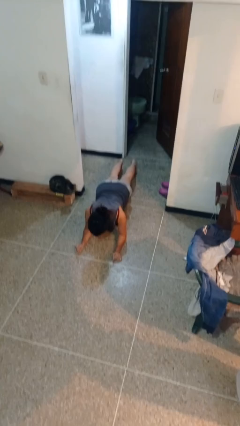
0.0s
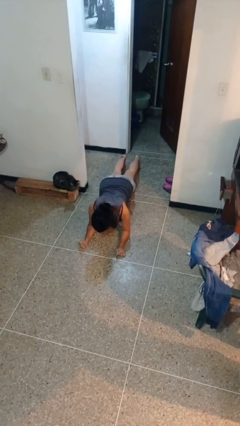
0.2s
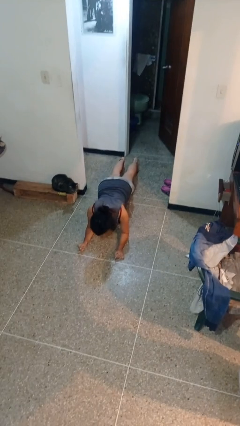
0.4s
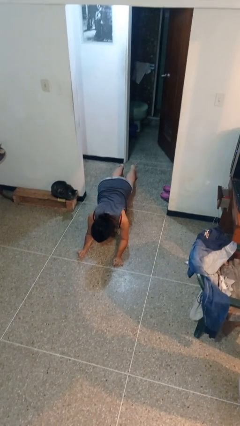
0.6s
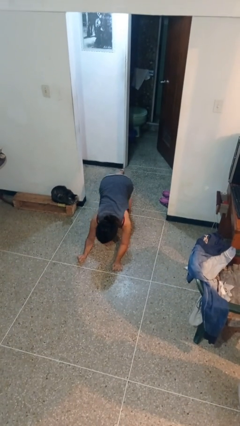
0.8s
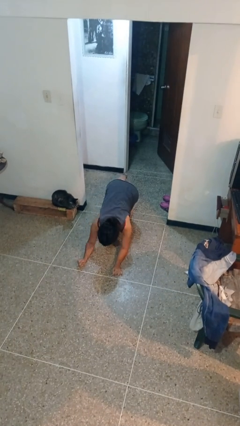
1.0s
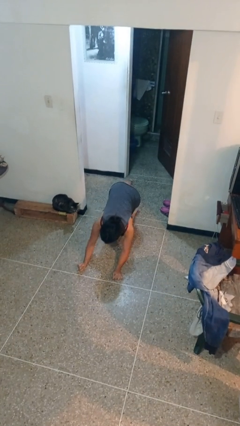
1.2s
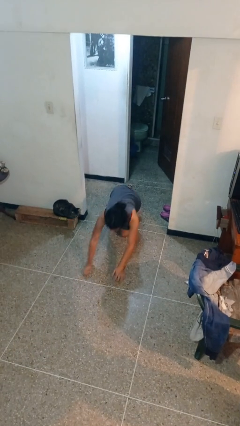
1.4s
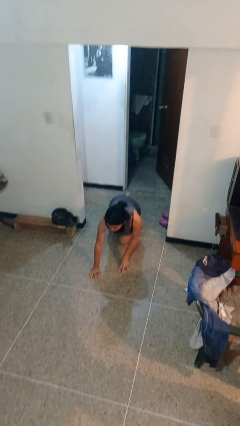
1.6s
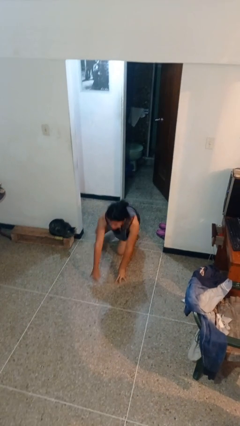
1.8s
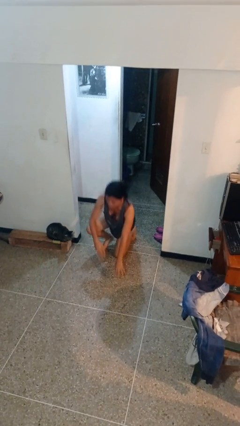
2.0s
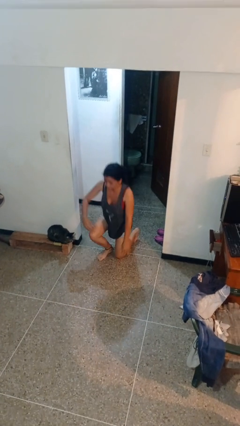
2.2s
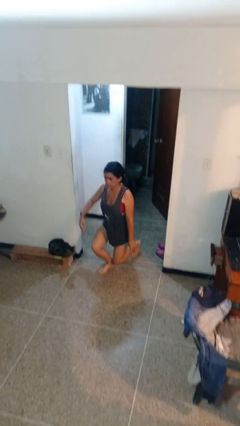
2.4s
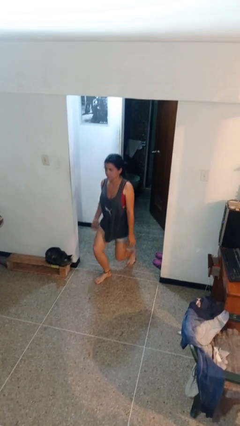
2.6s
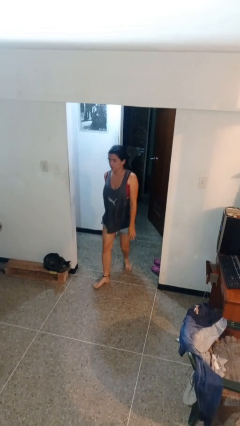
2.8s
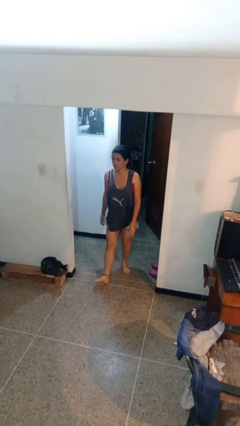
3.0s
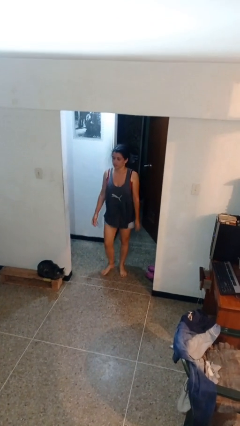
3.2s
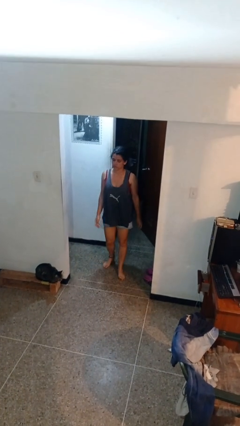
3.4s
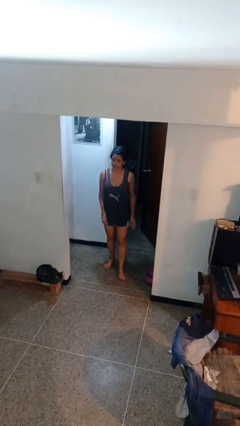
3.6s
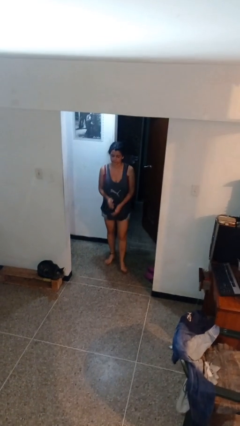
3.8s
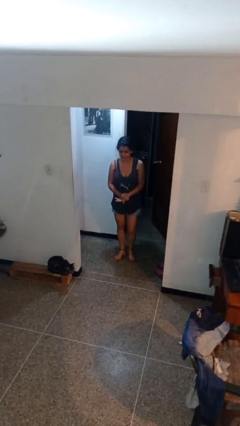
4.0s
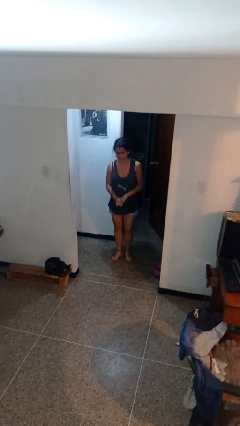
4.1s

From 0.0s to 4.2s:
person stands up from floor

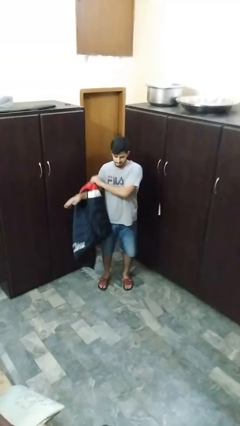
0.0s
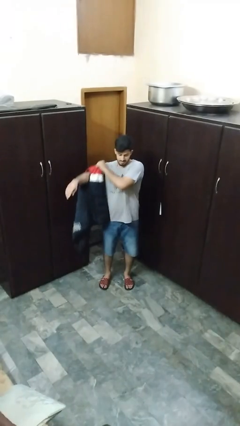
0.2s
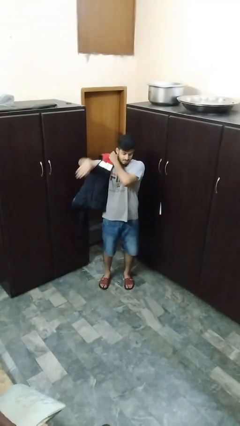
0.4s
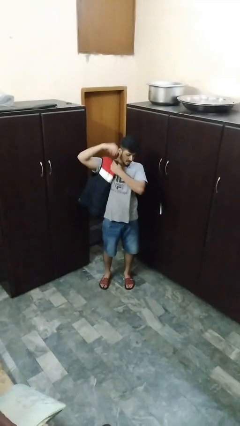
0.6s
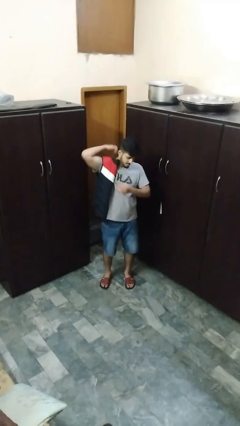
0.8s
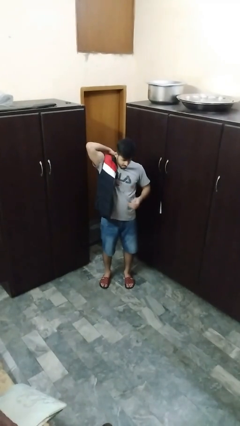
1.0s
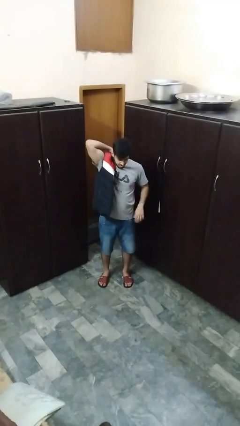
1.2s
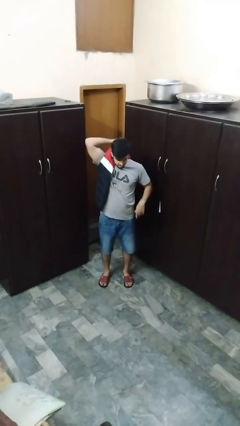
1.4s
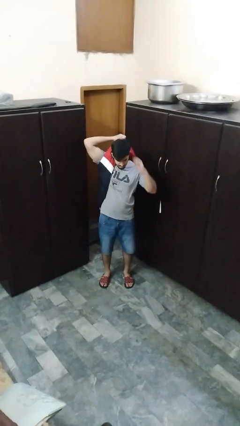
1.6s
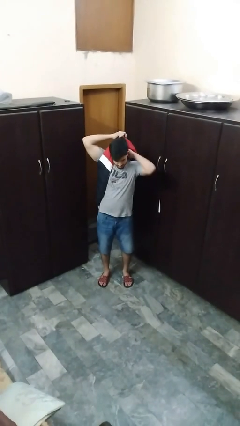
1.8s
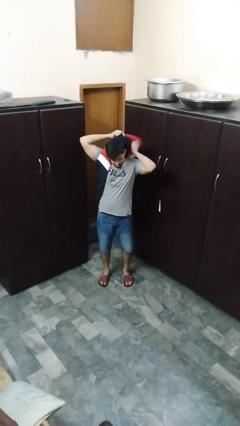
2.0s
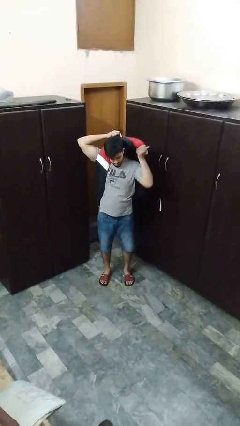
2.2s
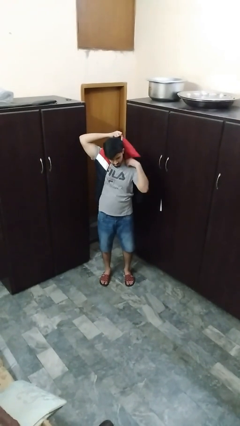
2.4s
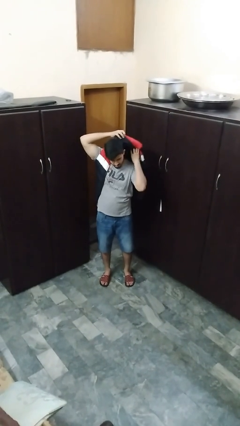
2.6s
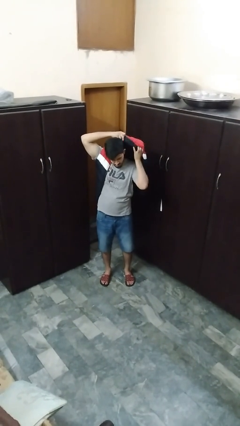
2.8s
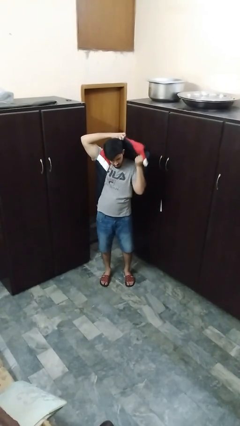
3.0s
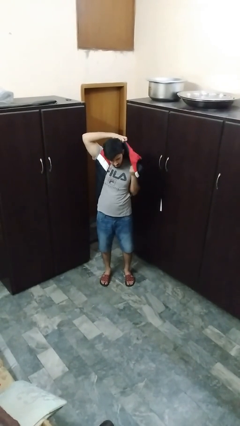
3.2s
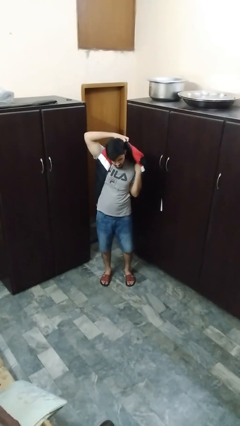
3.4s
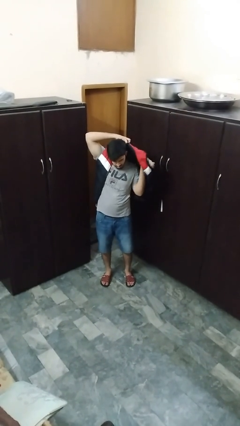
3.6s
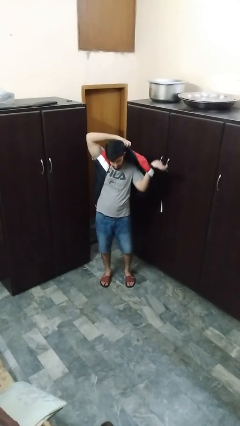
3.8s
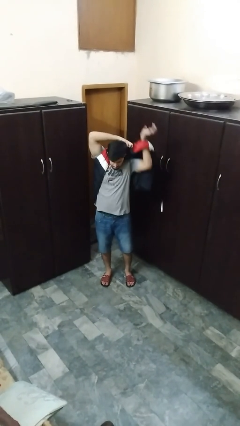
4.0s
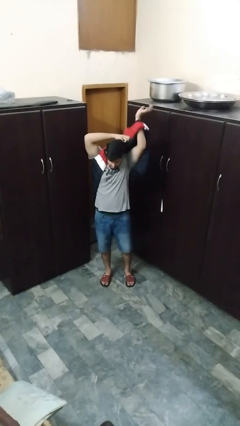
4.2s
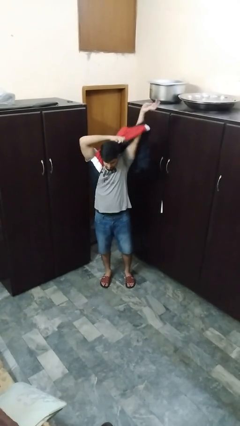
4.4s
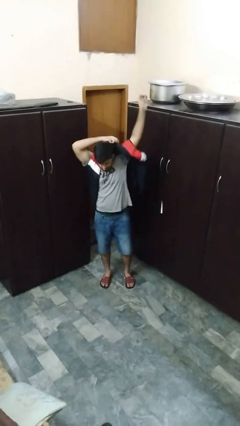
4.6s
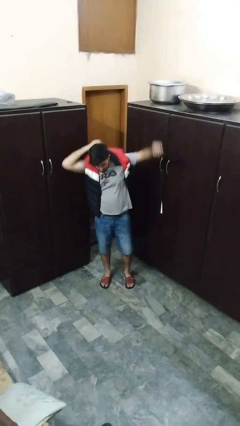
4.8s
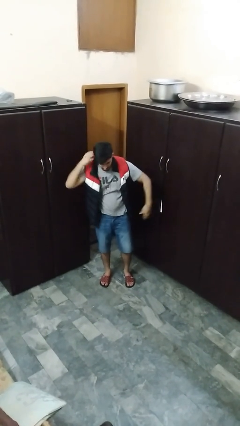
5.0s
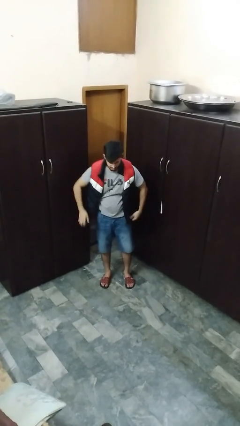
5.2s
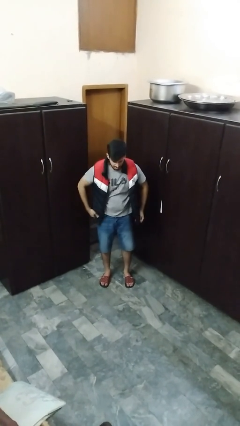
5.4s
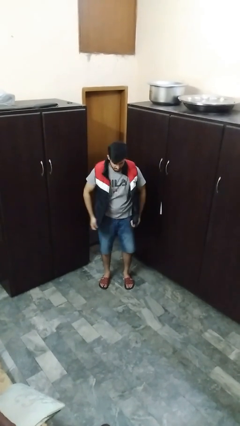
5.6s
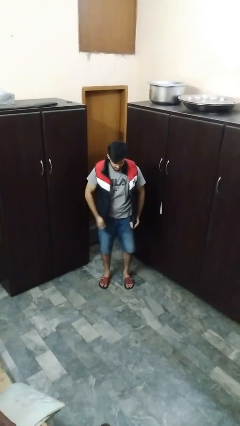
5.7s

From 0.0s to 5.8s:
person puts on jacket

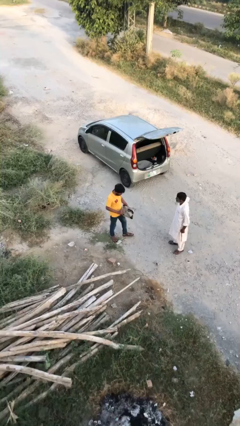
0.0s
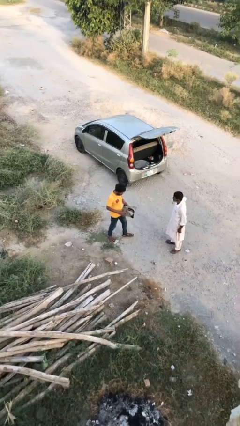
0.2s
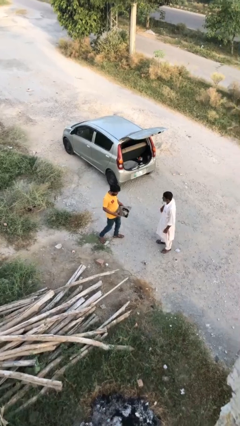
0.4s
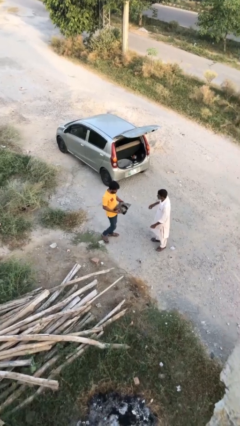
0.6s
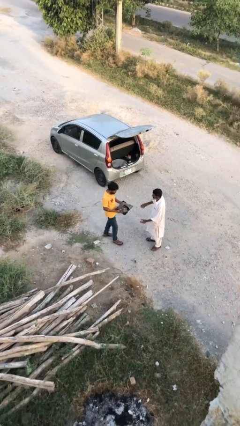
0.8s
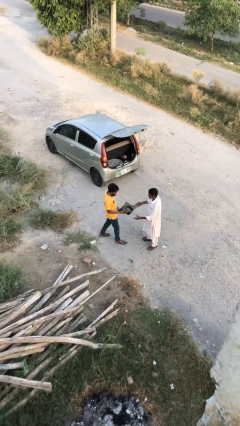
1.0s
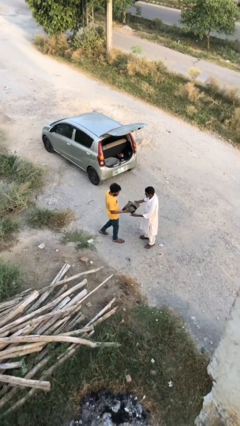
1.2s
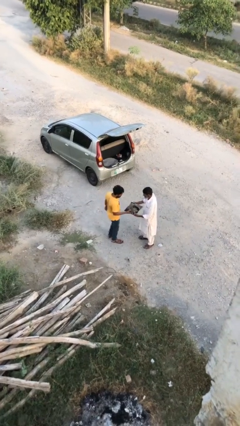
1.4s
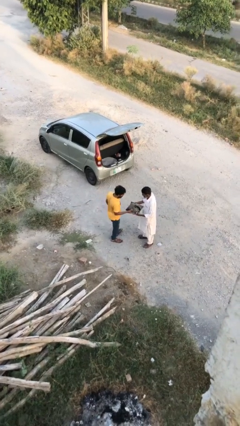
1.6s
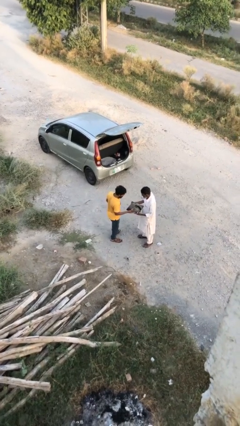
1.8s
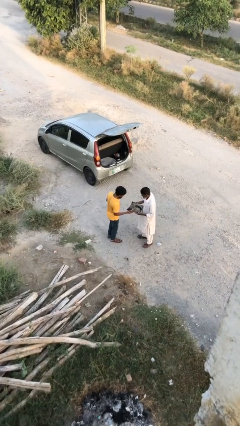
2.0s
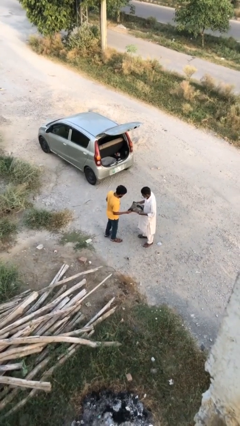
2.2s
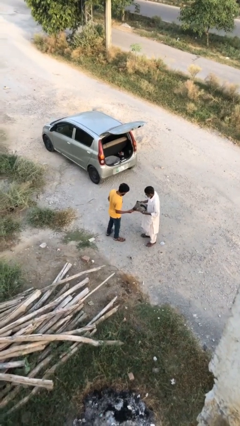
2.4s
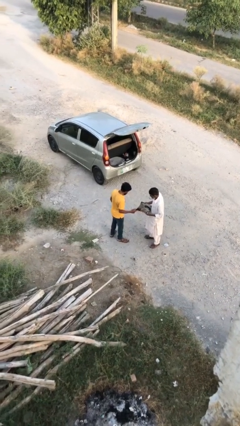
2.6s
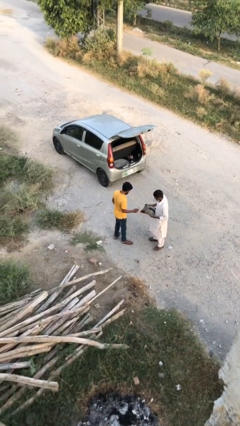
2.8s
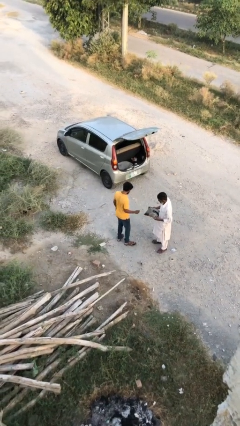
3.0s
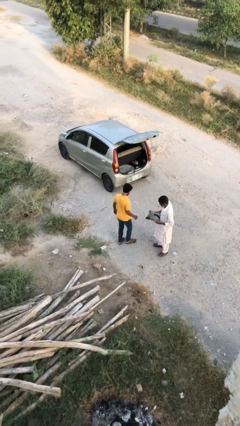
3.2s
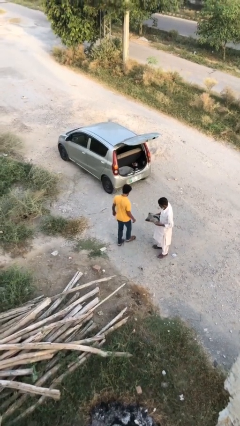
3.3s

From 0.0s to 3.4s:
person transfers object to person

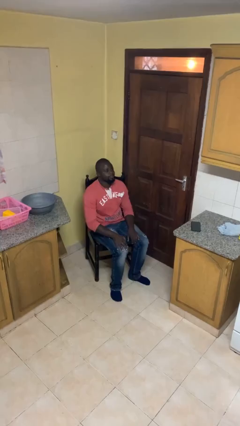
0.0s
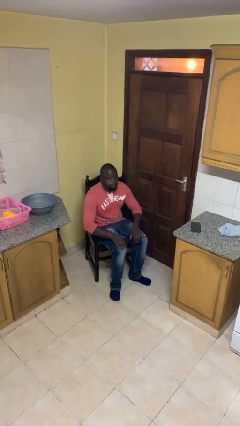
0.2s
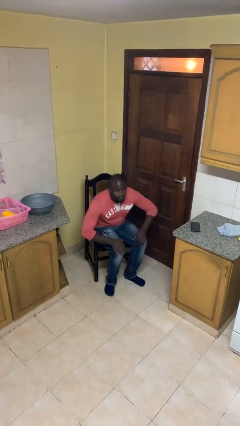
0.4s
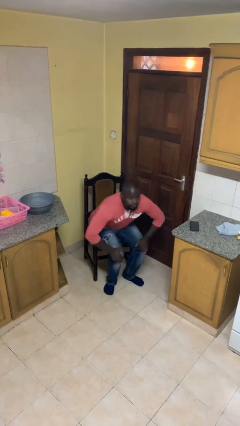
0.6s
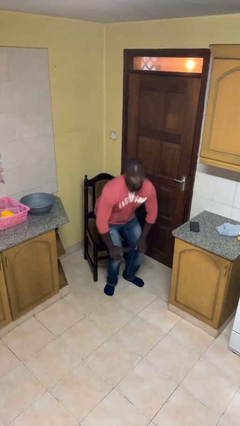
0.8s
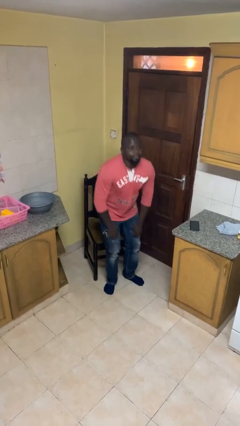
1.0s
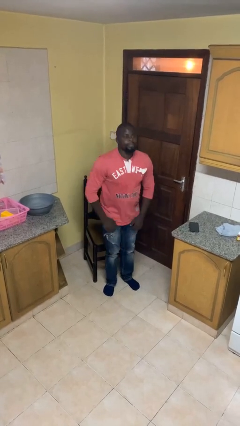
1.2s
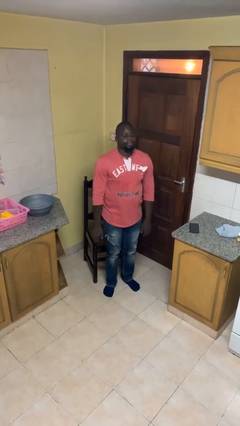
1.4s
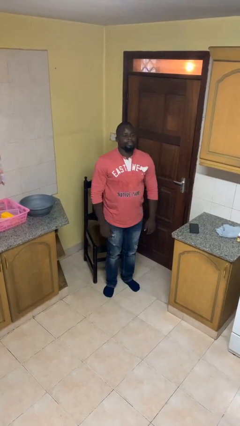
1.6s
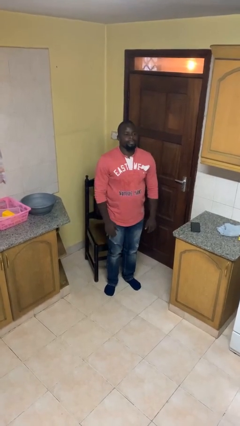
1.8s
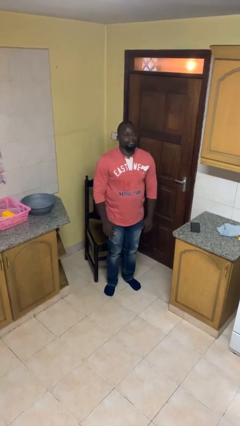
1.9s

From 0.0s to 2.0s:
person stands up

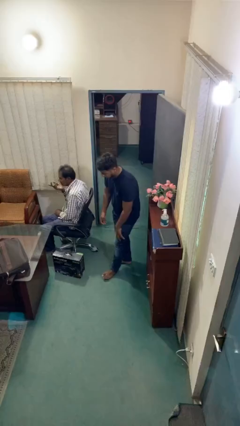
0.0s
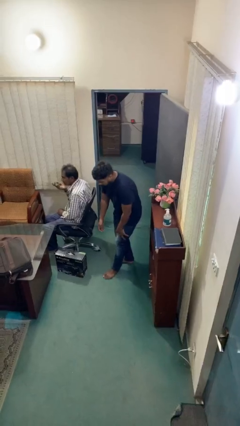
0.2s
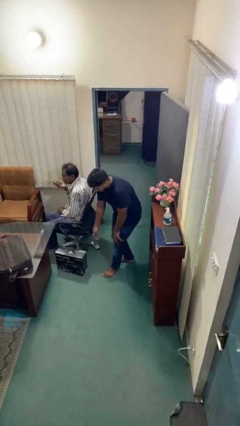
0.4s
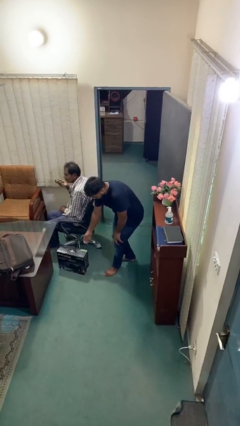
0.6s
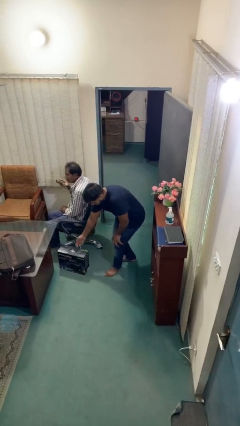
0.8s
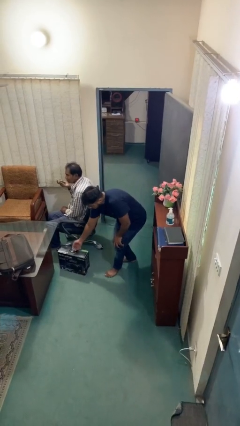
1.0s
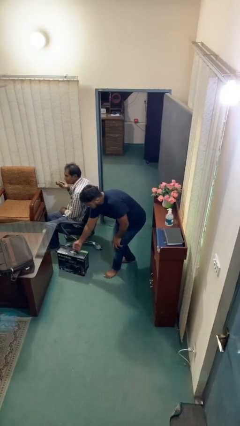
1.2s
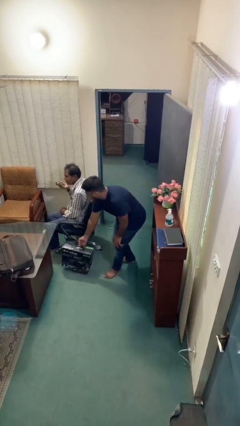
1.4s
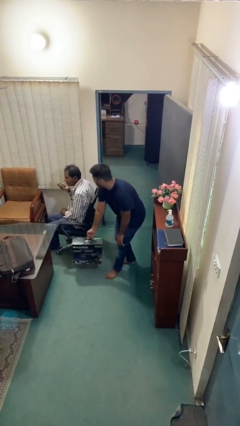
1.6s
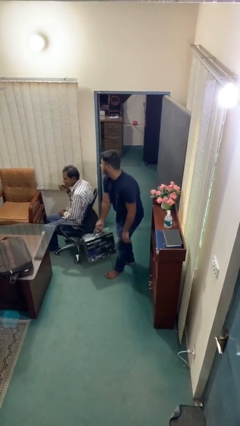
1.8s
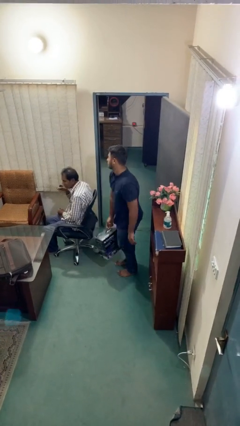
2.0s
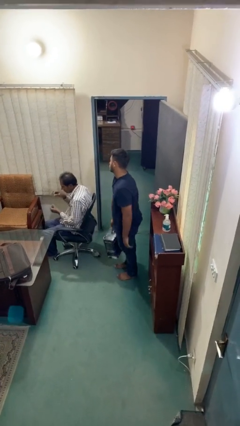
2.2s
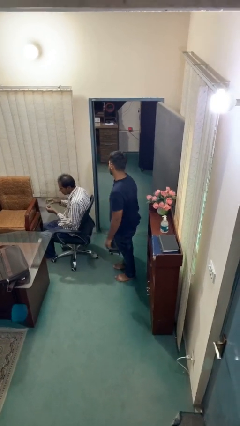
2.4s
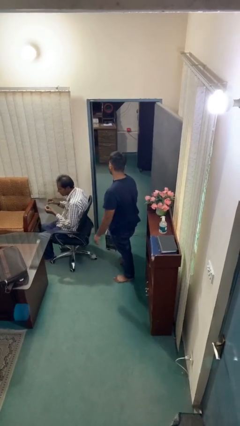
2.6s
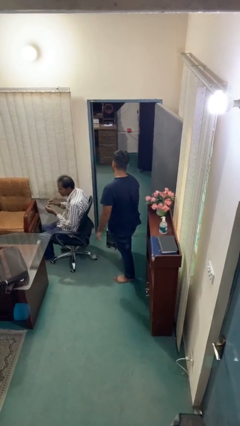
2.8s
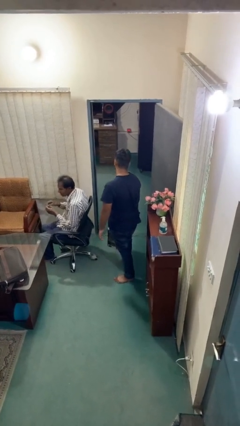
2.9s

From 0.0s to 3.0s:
person steals object from person
